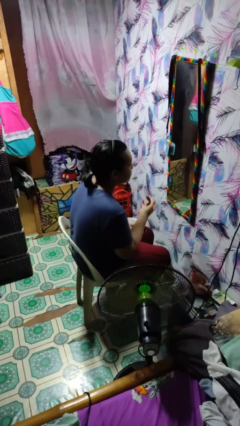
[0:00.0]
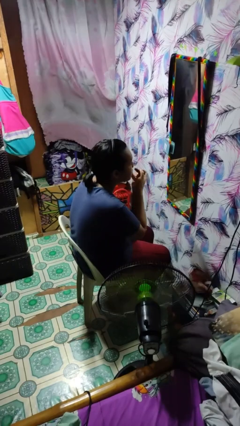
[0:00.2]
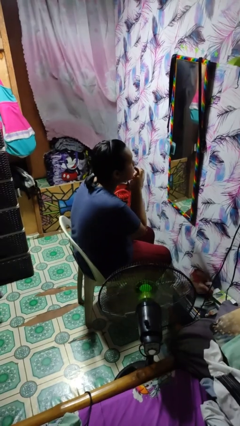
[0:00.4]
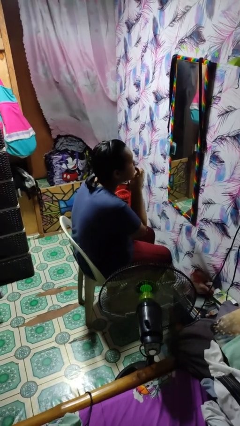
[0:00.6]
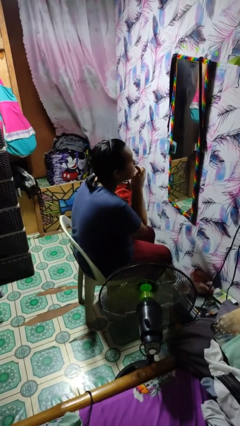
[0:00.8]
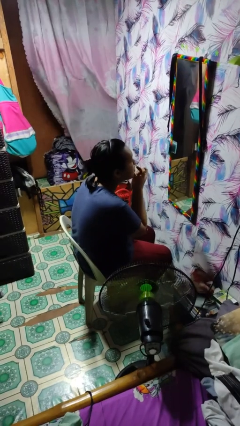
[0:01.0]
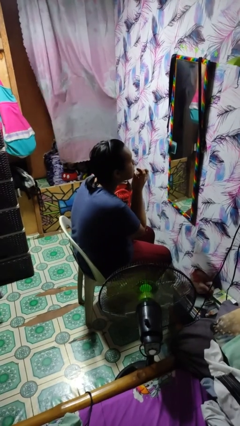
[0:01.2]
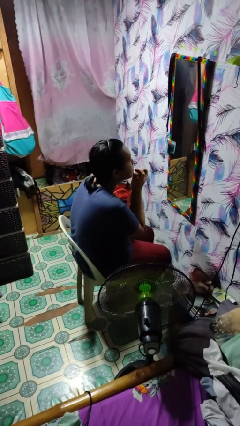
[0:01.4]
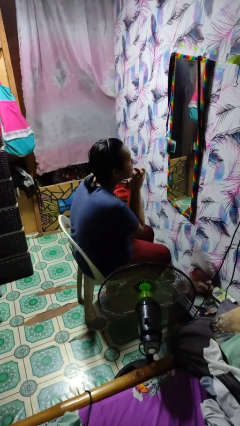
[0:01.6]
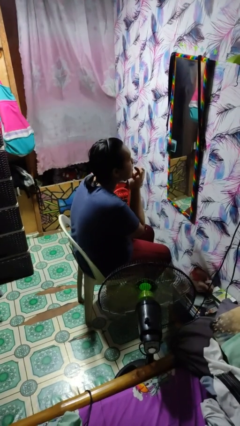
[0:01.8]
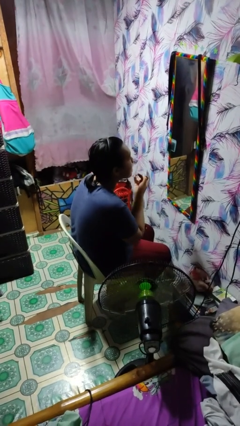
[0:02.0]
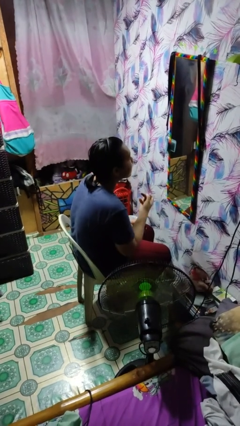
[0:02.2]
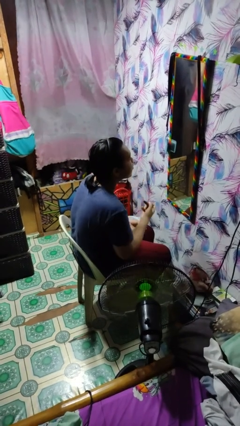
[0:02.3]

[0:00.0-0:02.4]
person applies lip makeup

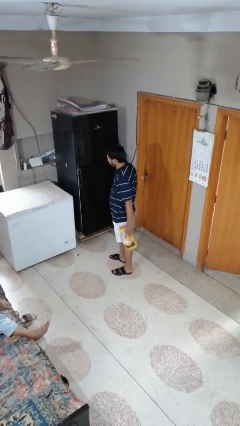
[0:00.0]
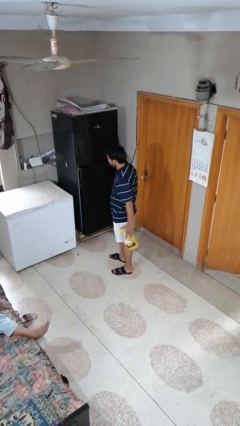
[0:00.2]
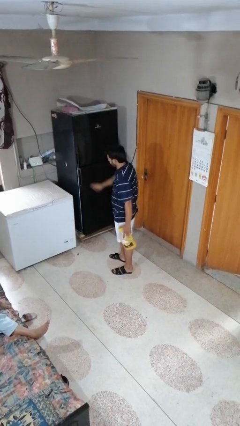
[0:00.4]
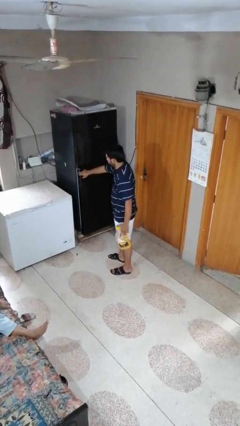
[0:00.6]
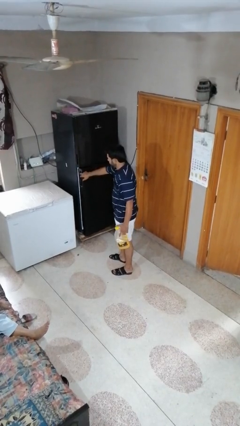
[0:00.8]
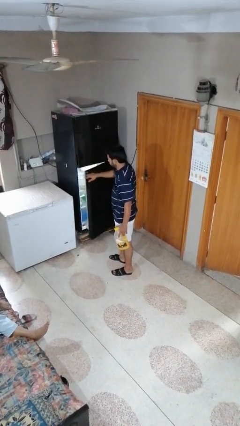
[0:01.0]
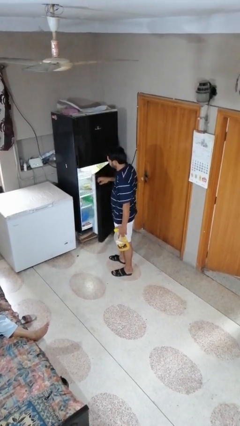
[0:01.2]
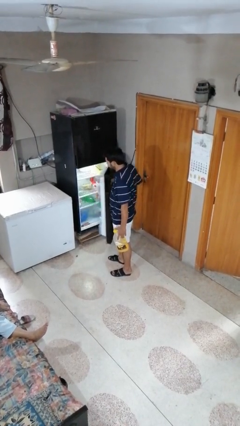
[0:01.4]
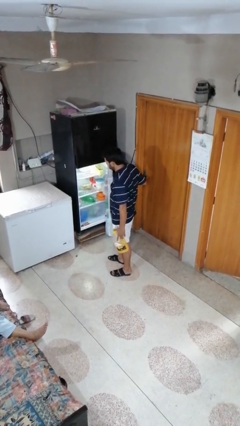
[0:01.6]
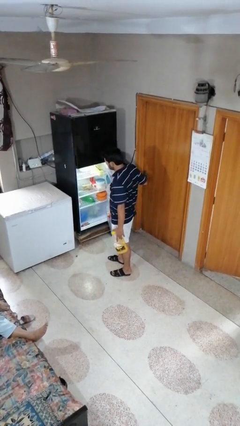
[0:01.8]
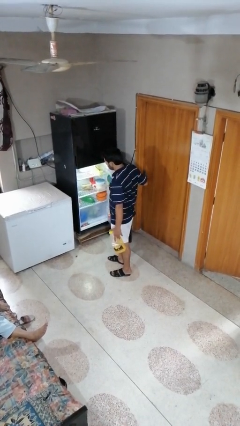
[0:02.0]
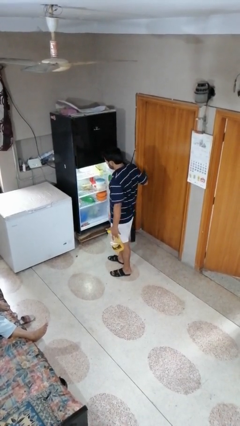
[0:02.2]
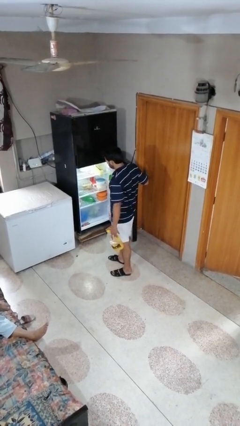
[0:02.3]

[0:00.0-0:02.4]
person opens refrigerator

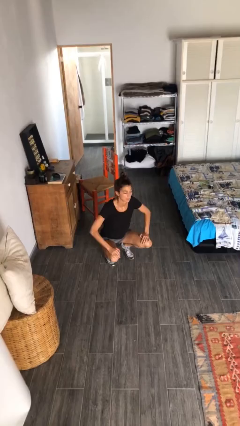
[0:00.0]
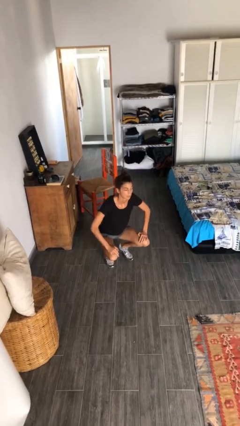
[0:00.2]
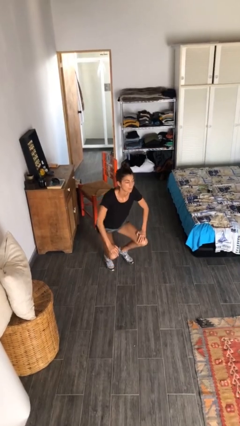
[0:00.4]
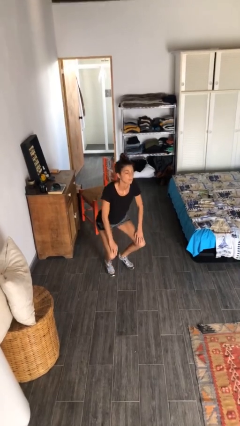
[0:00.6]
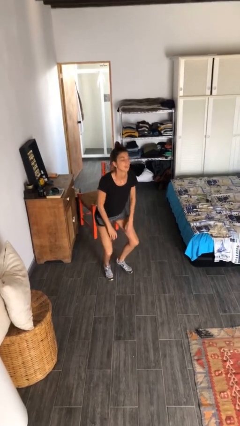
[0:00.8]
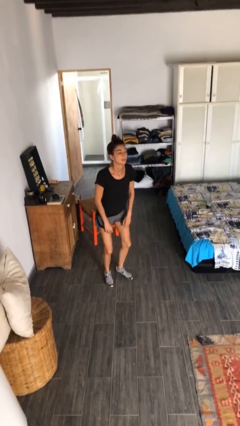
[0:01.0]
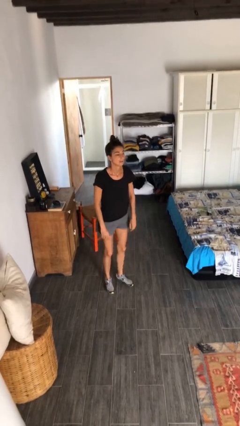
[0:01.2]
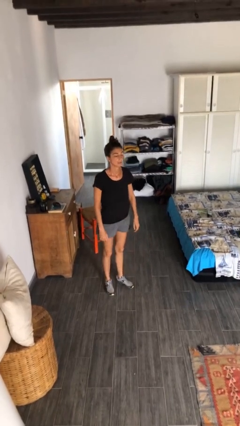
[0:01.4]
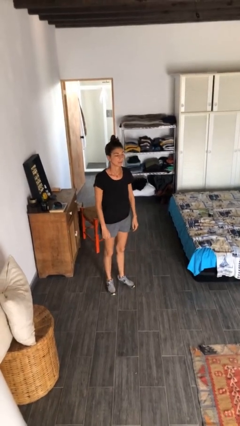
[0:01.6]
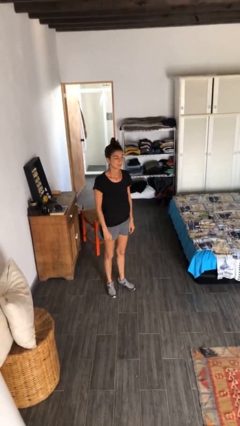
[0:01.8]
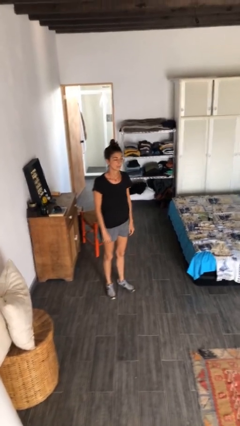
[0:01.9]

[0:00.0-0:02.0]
person stands up

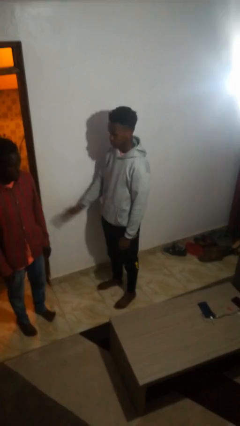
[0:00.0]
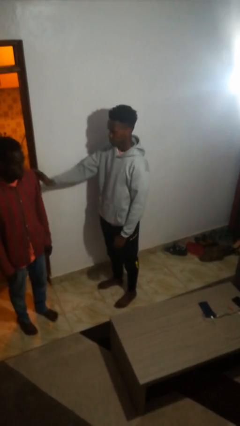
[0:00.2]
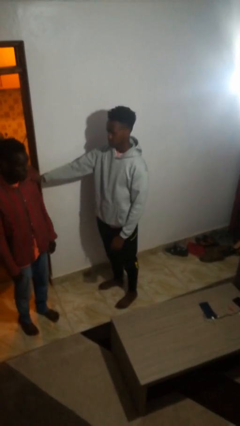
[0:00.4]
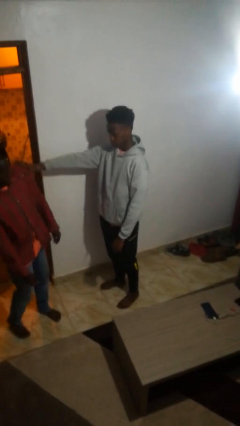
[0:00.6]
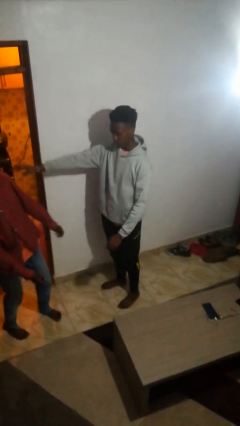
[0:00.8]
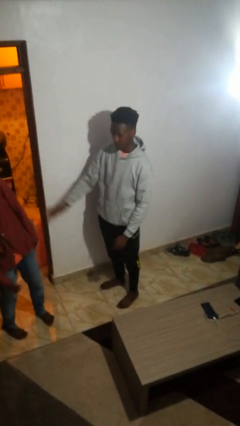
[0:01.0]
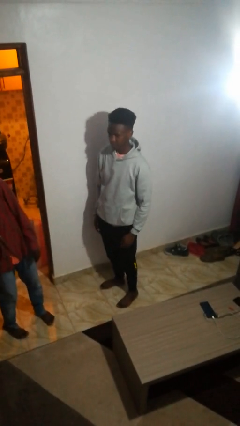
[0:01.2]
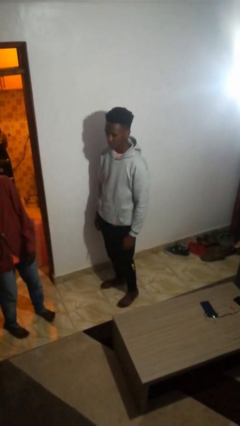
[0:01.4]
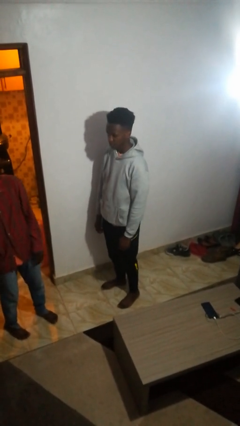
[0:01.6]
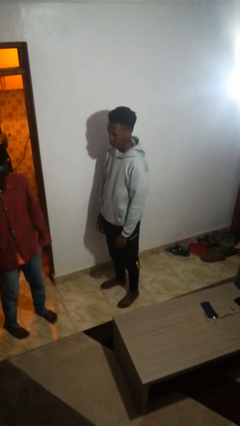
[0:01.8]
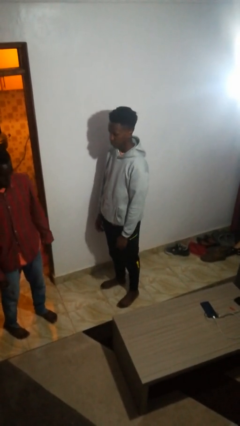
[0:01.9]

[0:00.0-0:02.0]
person shoves person

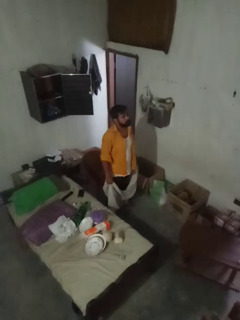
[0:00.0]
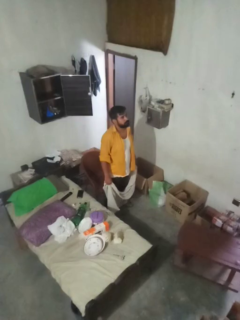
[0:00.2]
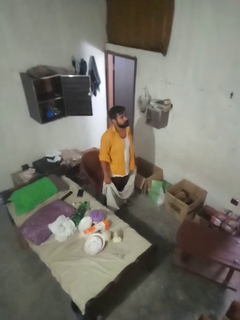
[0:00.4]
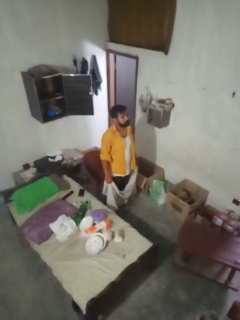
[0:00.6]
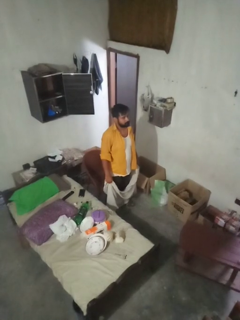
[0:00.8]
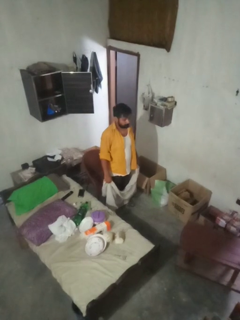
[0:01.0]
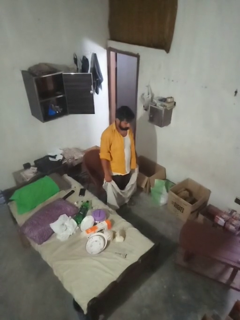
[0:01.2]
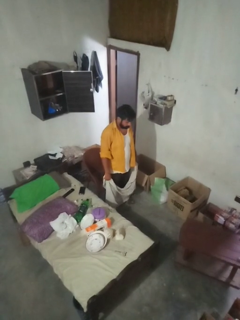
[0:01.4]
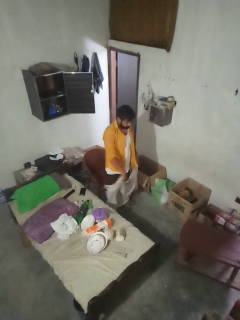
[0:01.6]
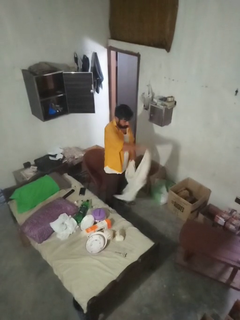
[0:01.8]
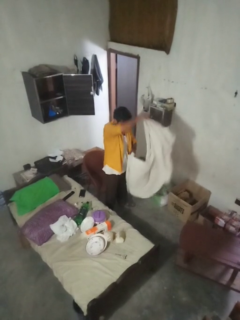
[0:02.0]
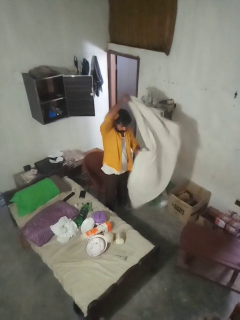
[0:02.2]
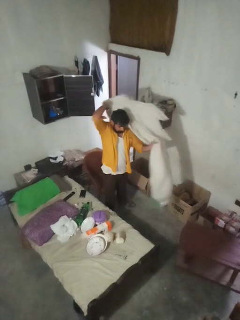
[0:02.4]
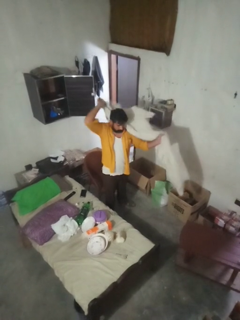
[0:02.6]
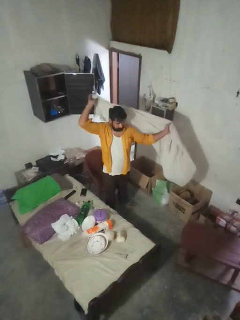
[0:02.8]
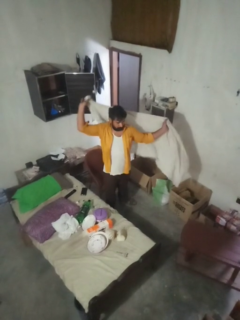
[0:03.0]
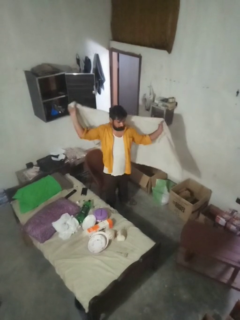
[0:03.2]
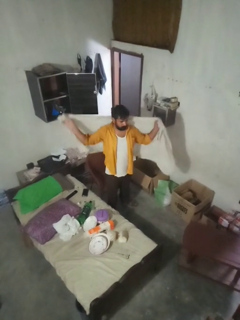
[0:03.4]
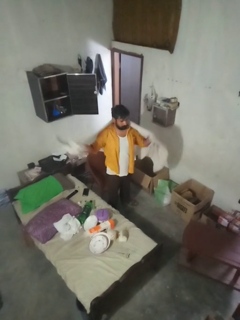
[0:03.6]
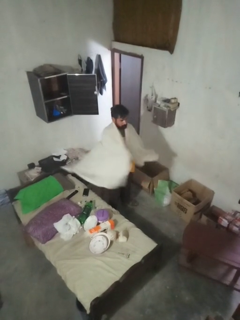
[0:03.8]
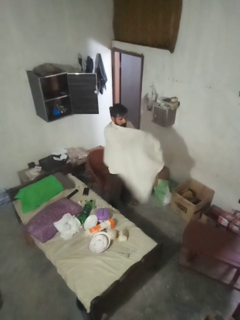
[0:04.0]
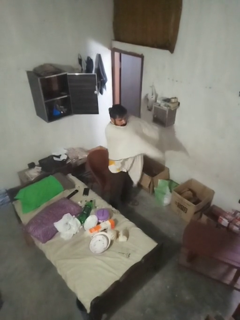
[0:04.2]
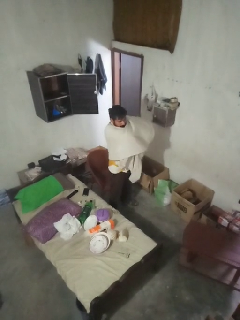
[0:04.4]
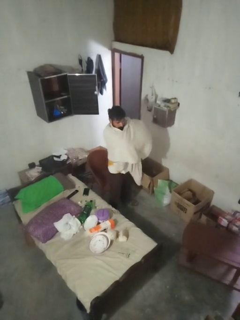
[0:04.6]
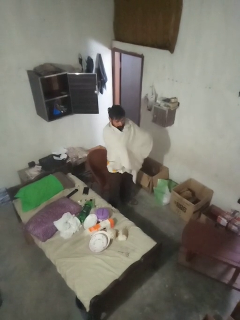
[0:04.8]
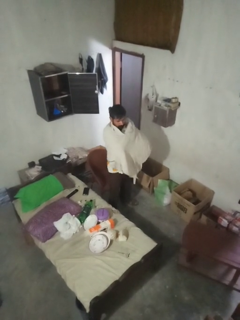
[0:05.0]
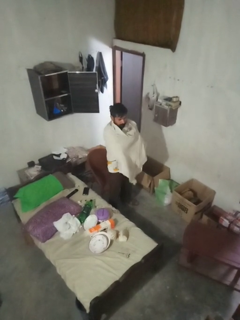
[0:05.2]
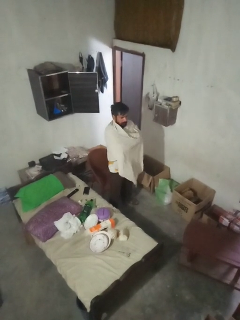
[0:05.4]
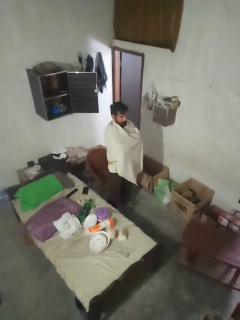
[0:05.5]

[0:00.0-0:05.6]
person covers with blanket

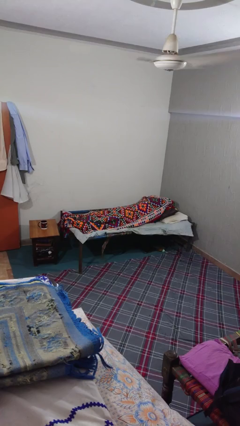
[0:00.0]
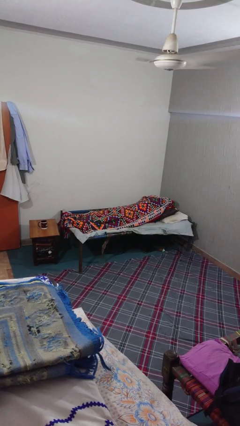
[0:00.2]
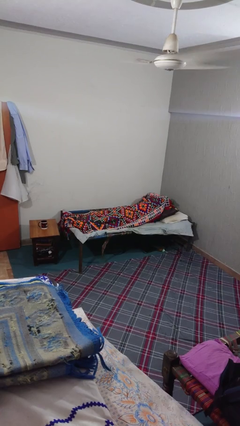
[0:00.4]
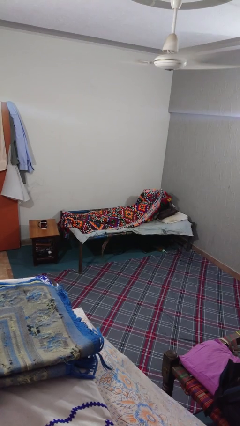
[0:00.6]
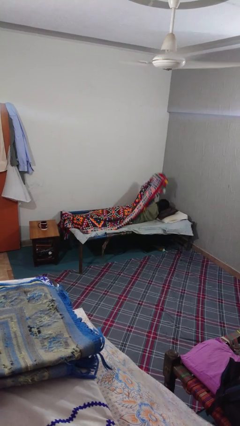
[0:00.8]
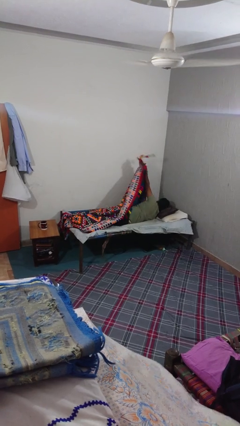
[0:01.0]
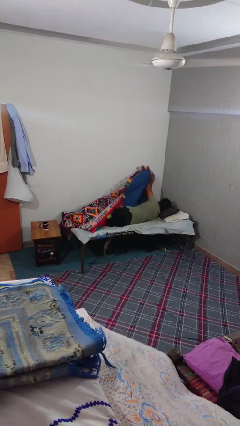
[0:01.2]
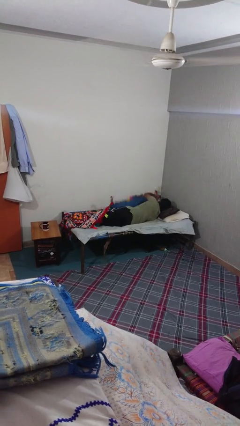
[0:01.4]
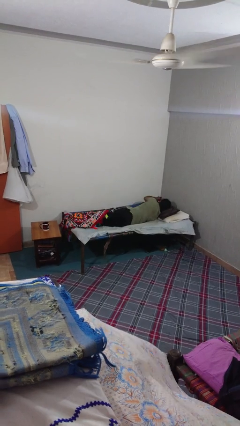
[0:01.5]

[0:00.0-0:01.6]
person uncovers with blanket

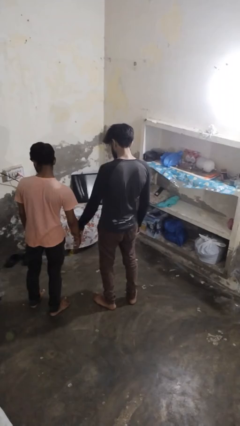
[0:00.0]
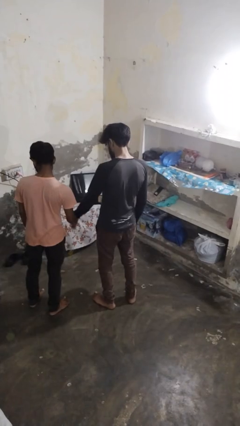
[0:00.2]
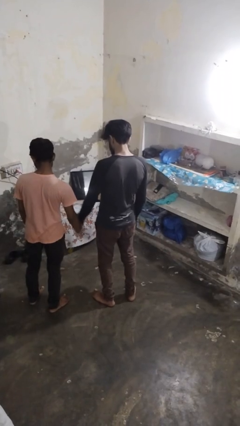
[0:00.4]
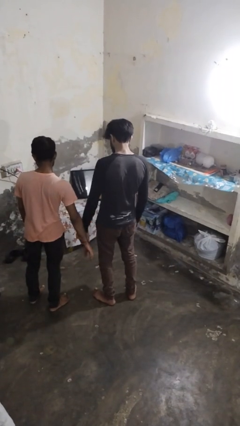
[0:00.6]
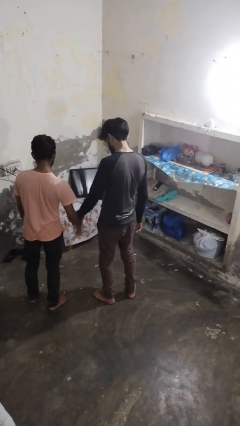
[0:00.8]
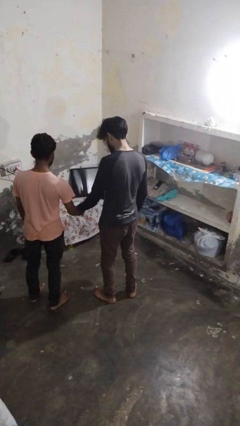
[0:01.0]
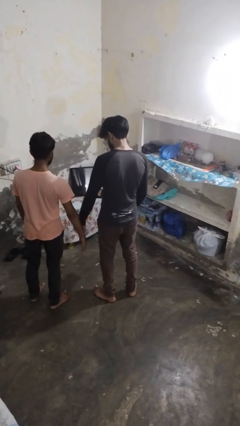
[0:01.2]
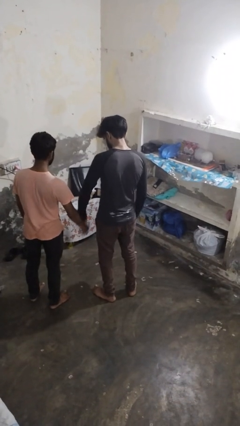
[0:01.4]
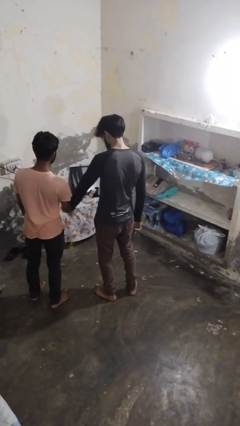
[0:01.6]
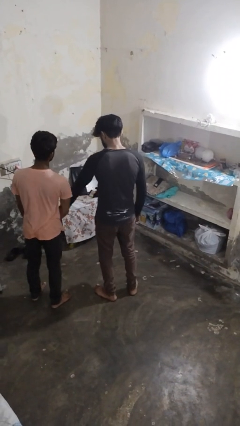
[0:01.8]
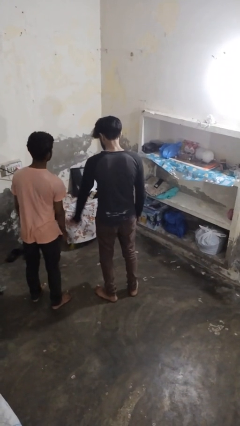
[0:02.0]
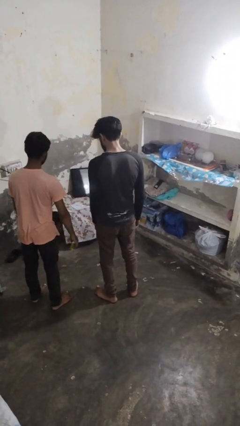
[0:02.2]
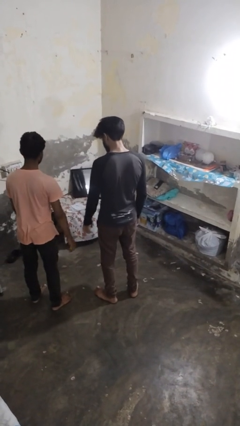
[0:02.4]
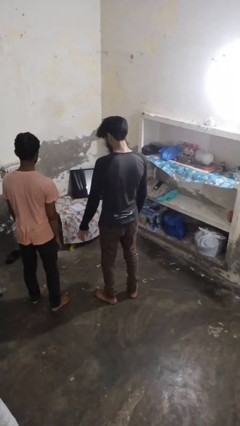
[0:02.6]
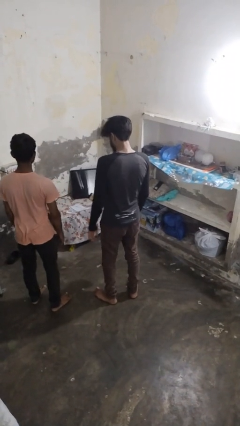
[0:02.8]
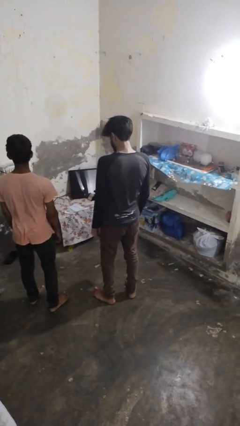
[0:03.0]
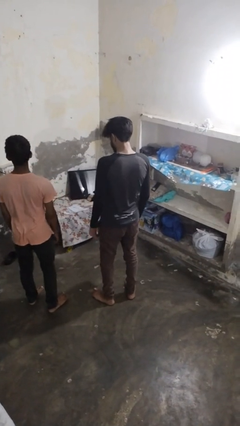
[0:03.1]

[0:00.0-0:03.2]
person grabs person by forearm
